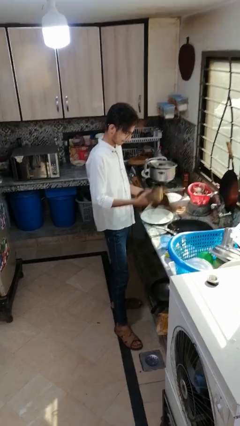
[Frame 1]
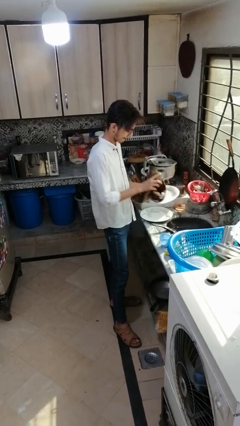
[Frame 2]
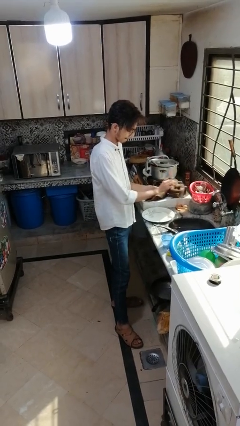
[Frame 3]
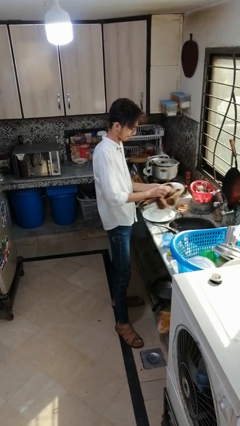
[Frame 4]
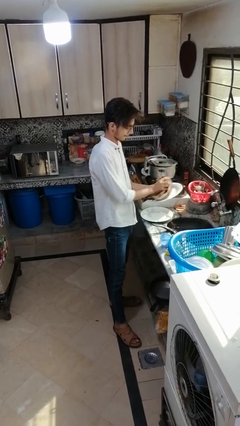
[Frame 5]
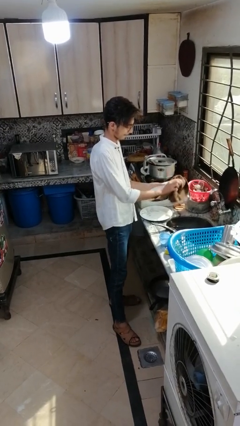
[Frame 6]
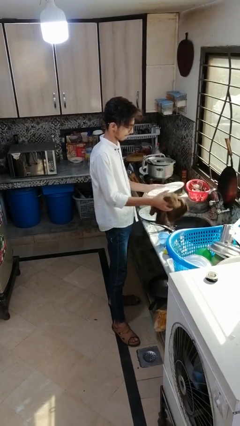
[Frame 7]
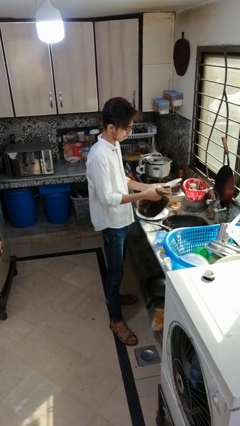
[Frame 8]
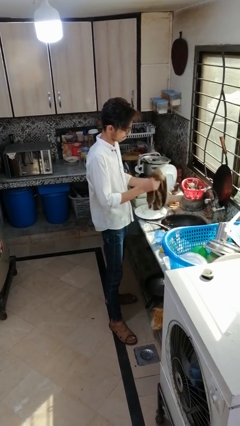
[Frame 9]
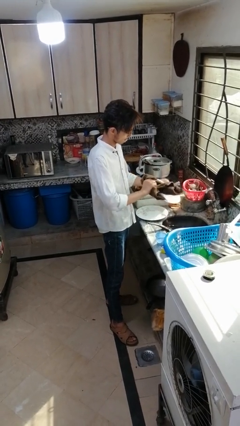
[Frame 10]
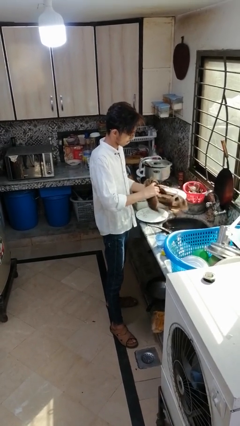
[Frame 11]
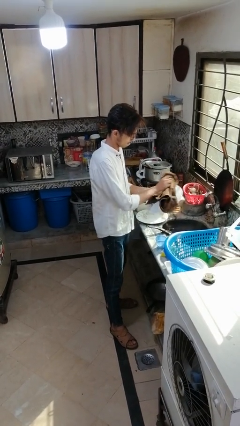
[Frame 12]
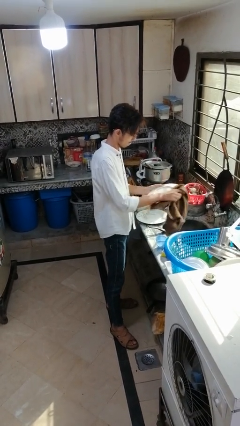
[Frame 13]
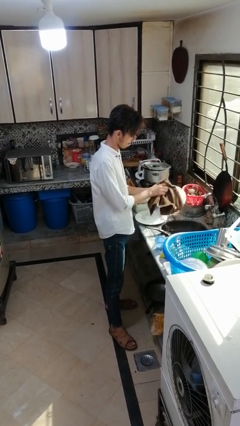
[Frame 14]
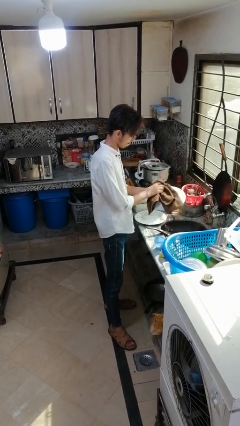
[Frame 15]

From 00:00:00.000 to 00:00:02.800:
person dries dish

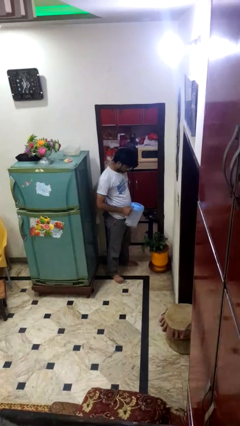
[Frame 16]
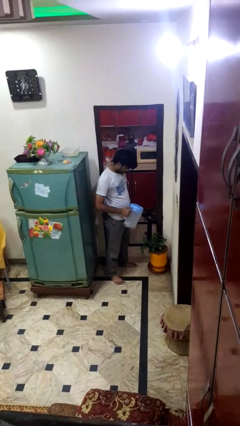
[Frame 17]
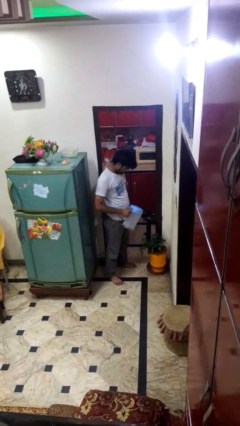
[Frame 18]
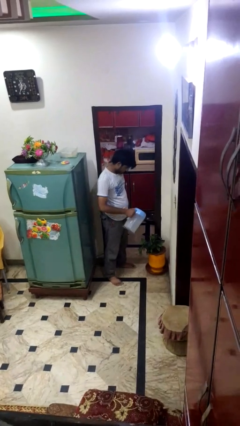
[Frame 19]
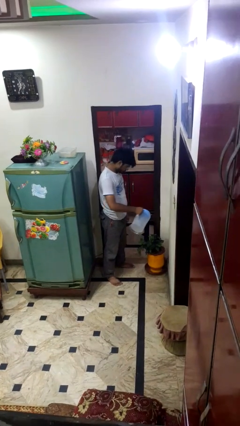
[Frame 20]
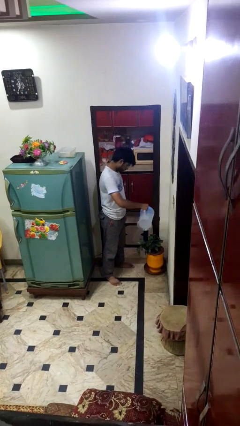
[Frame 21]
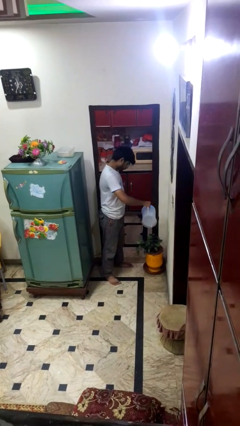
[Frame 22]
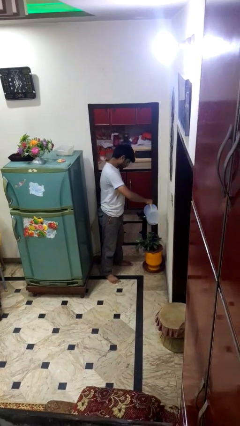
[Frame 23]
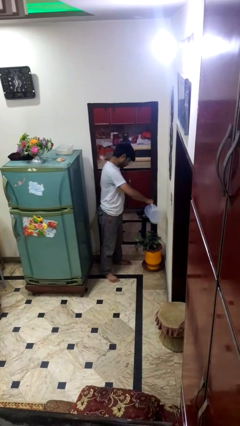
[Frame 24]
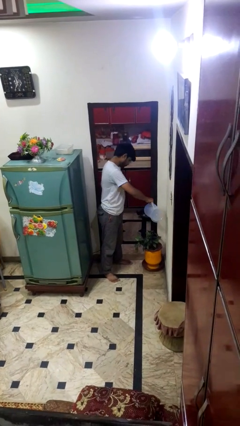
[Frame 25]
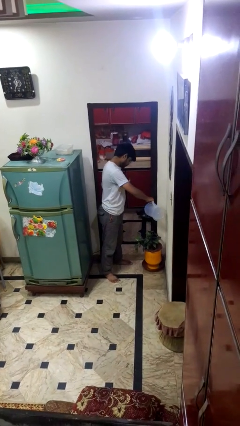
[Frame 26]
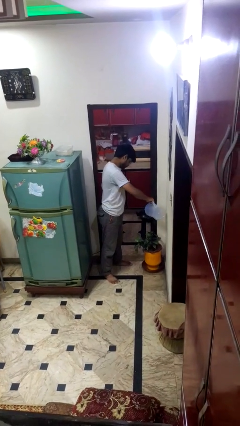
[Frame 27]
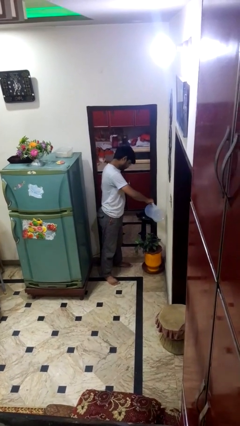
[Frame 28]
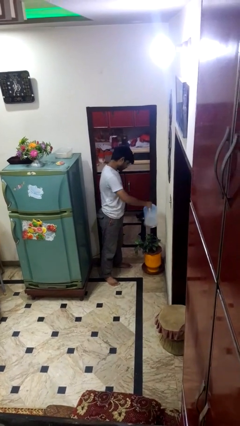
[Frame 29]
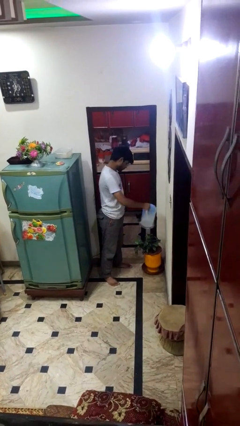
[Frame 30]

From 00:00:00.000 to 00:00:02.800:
person waters houseplant

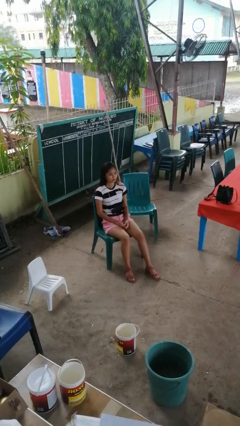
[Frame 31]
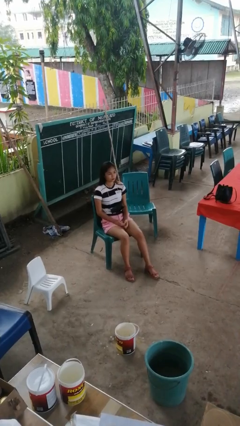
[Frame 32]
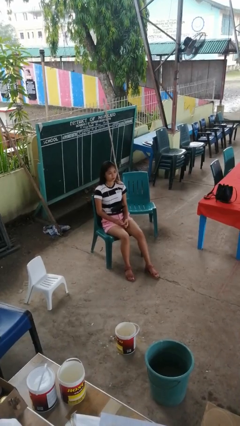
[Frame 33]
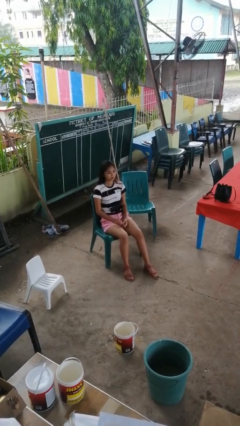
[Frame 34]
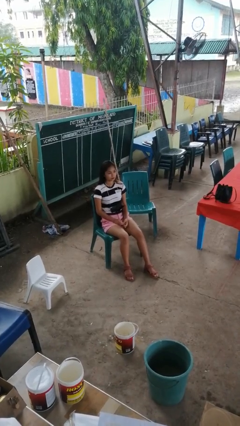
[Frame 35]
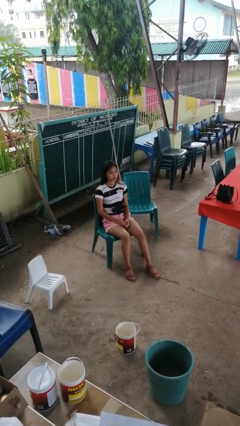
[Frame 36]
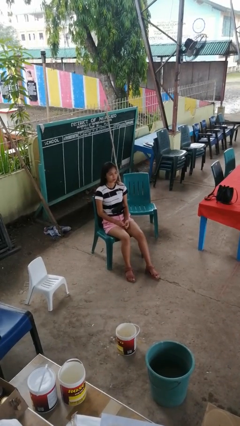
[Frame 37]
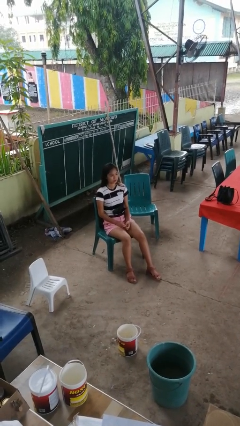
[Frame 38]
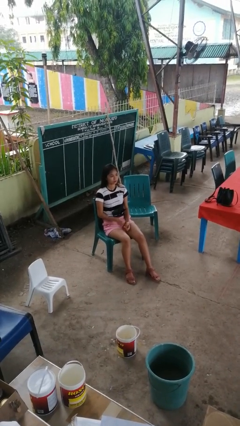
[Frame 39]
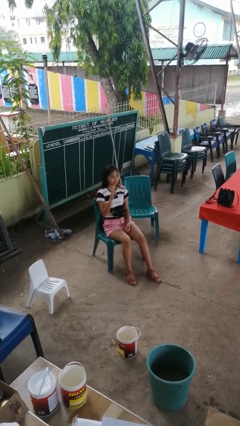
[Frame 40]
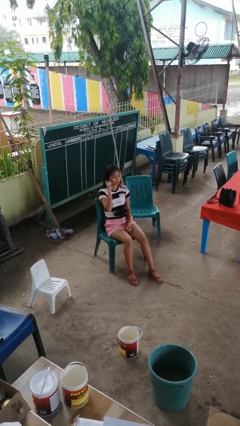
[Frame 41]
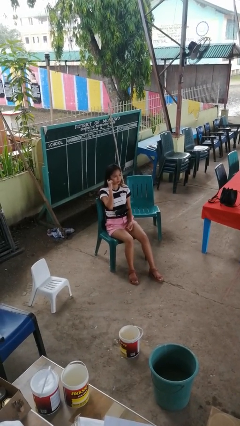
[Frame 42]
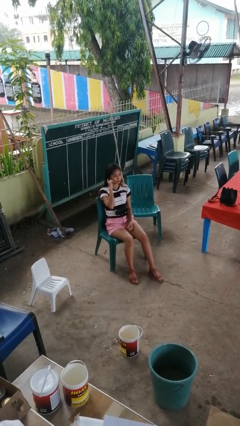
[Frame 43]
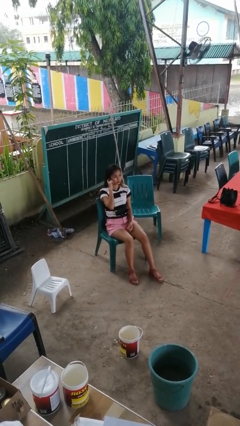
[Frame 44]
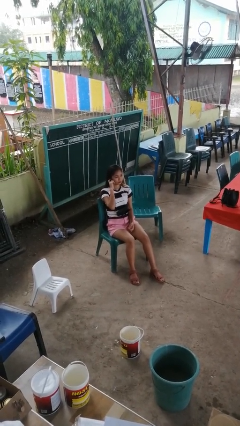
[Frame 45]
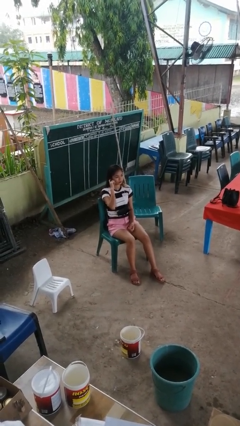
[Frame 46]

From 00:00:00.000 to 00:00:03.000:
person gestures listen closely

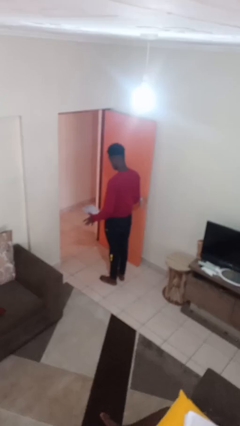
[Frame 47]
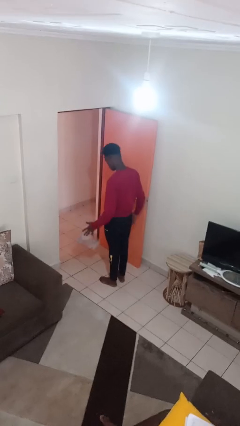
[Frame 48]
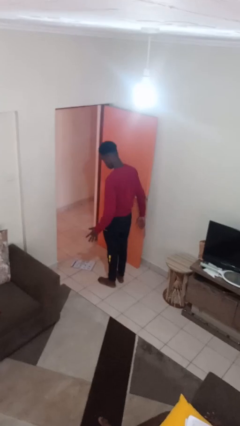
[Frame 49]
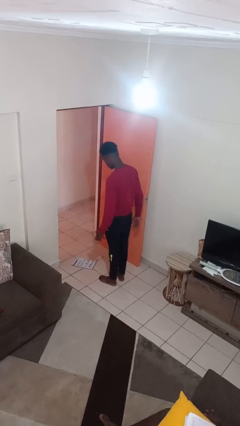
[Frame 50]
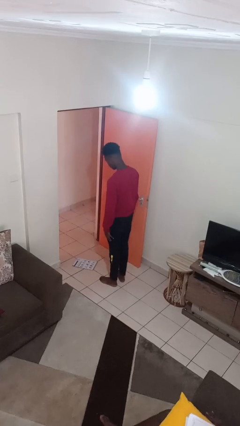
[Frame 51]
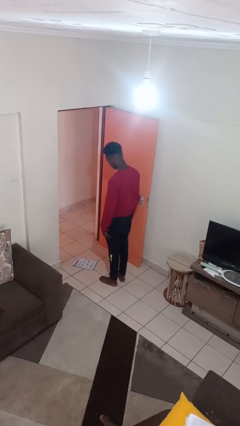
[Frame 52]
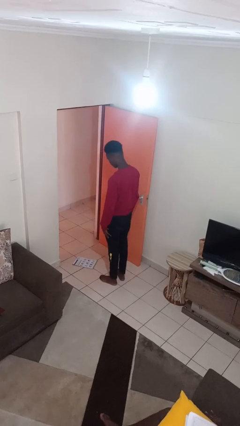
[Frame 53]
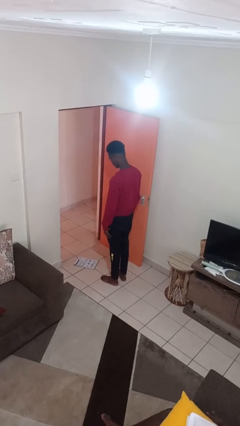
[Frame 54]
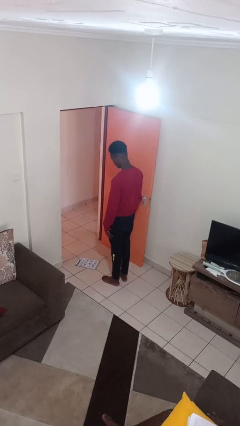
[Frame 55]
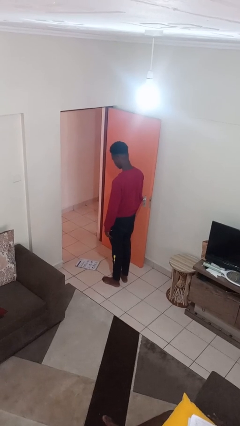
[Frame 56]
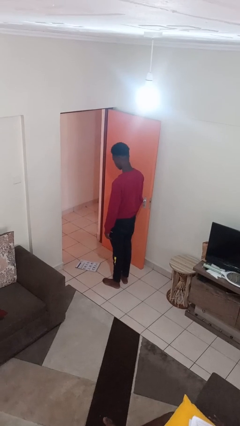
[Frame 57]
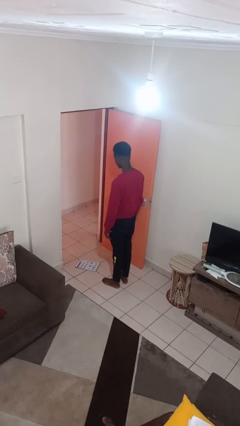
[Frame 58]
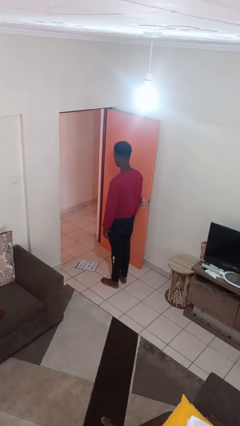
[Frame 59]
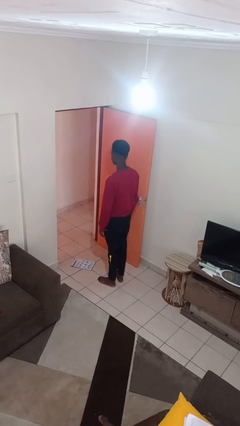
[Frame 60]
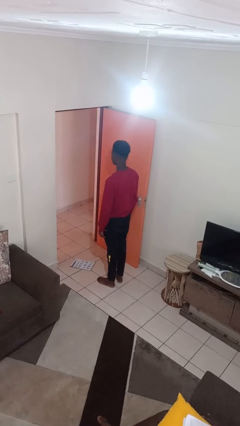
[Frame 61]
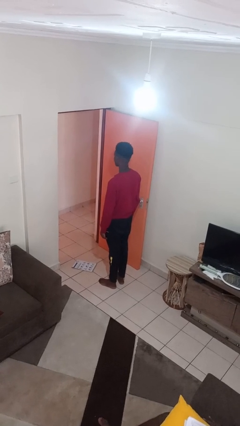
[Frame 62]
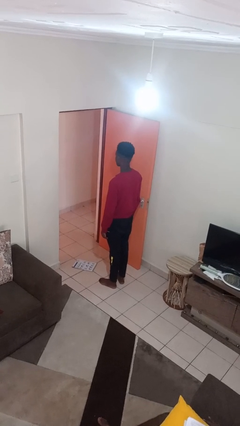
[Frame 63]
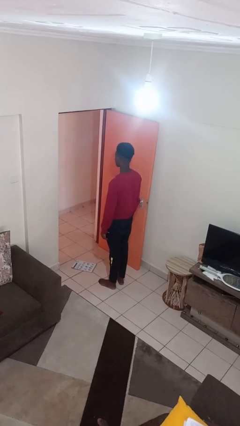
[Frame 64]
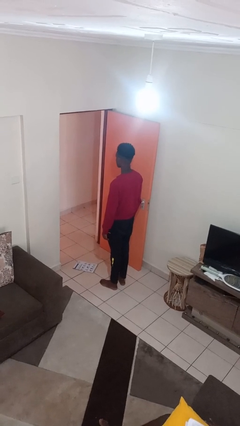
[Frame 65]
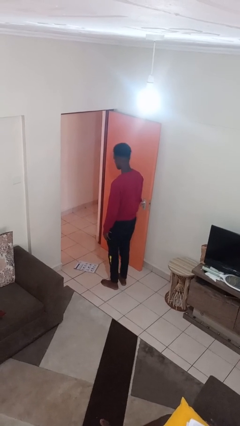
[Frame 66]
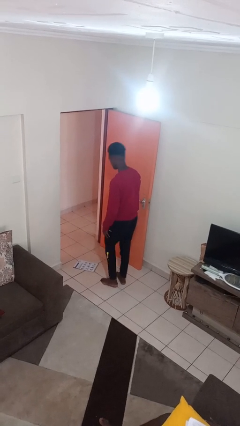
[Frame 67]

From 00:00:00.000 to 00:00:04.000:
person drops object

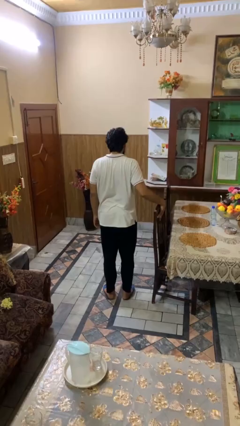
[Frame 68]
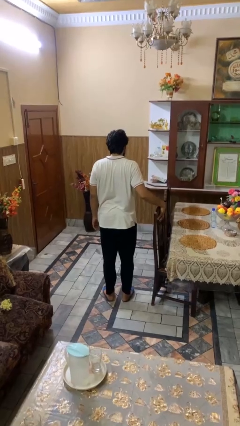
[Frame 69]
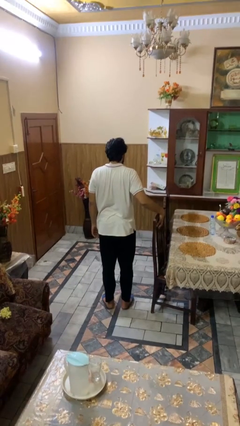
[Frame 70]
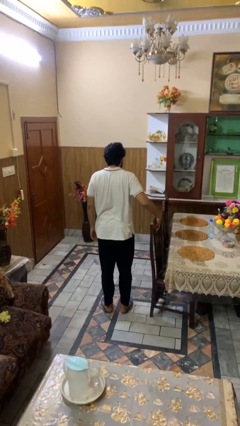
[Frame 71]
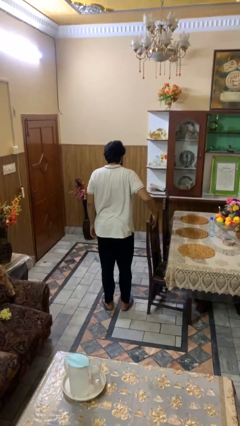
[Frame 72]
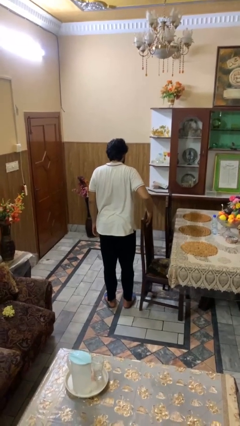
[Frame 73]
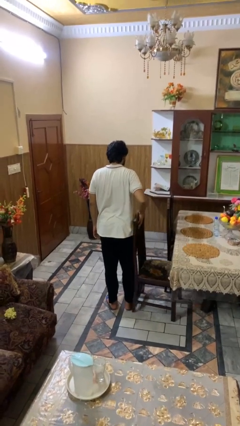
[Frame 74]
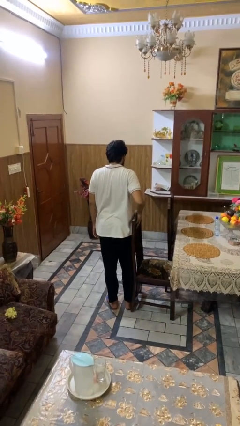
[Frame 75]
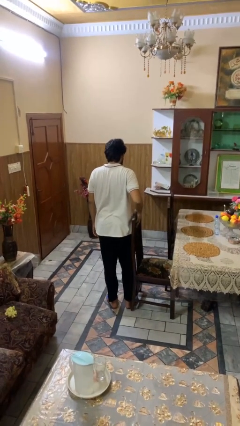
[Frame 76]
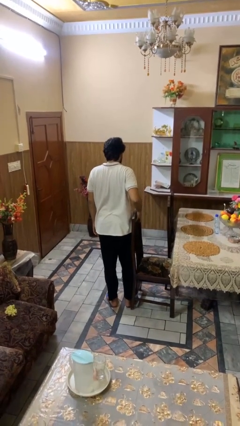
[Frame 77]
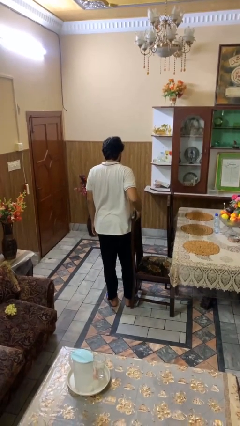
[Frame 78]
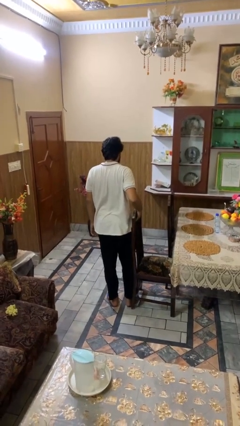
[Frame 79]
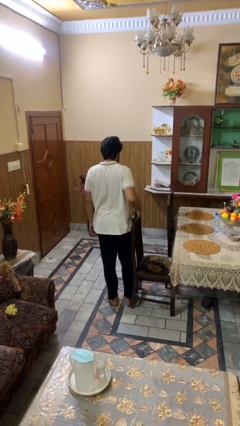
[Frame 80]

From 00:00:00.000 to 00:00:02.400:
person pulls out chair

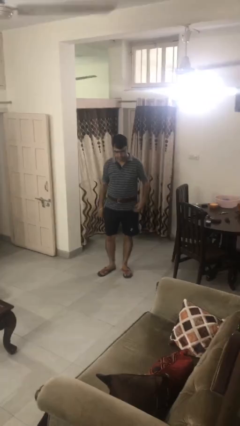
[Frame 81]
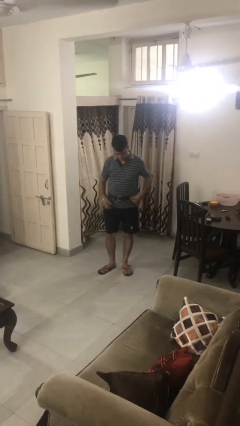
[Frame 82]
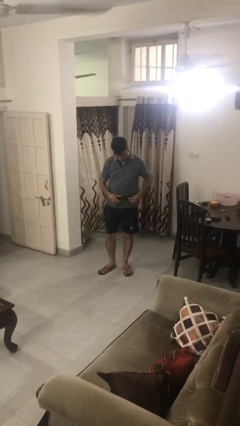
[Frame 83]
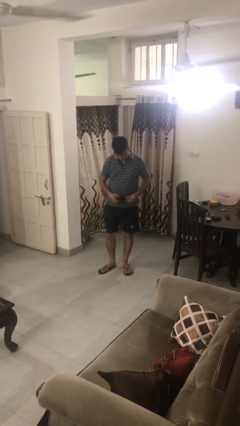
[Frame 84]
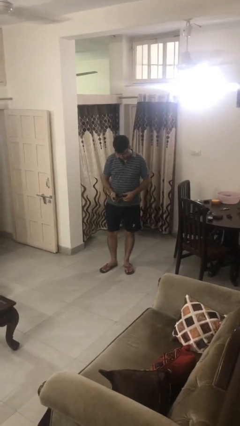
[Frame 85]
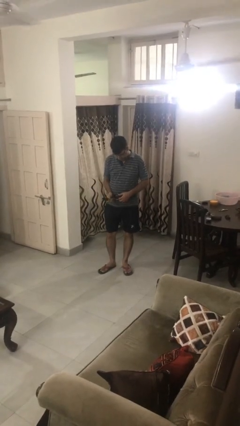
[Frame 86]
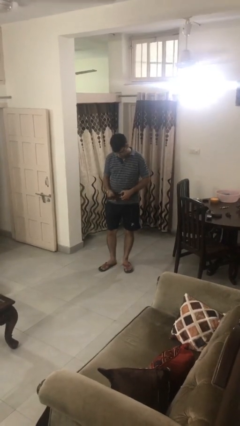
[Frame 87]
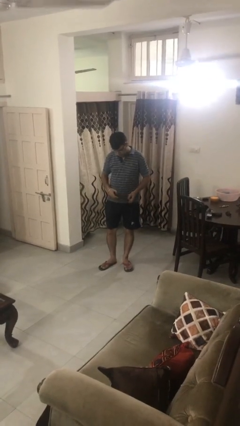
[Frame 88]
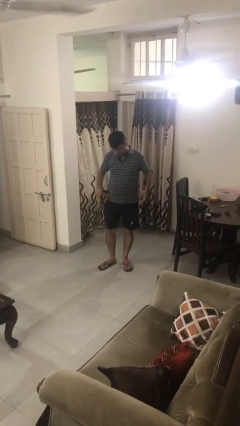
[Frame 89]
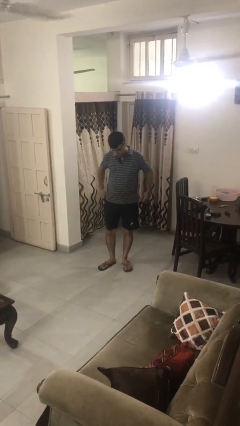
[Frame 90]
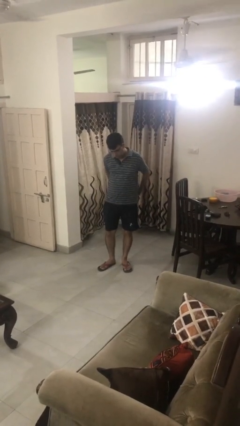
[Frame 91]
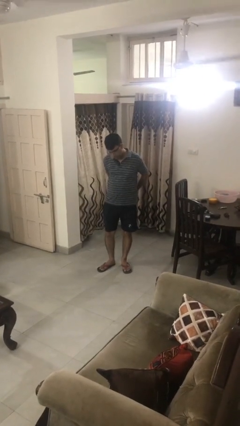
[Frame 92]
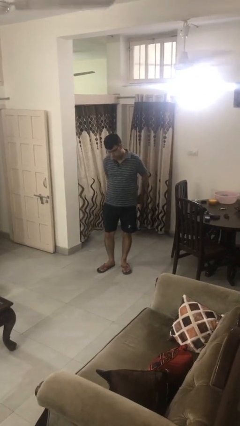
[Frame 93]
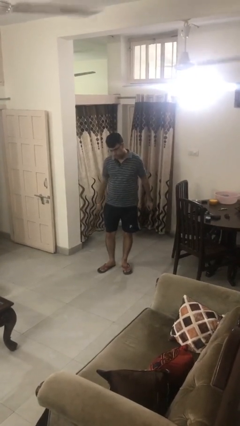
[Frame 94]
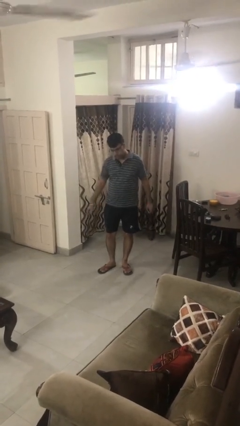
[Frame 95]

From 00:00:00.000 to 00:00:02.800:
person takes off belt
